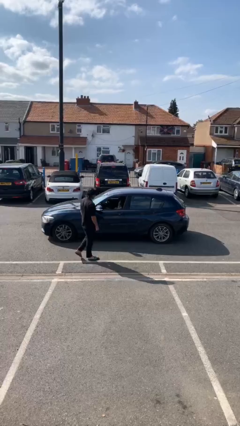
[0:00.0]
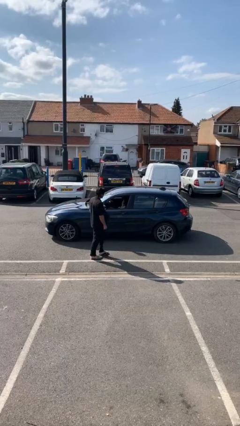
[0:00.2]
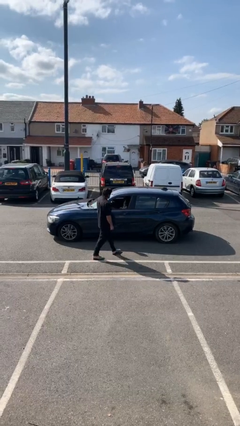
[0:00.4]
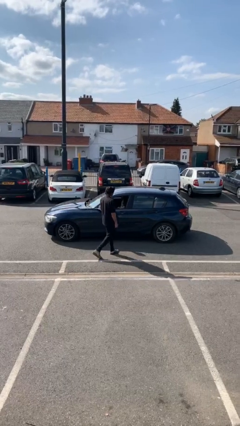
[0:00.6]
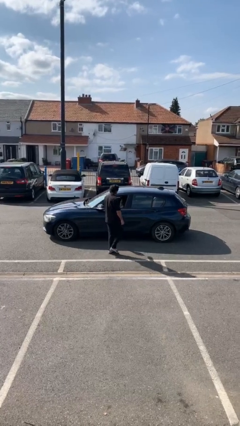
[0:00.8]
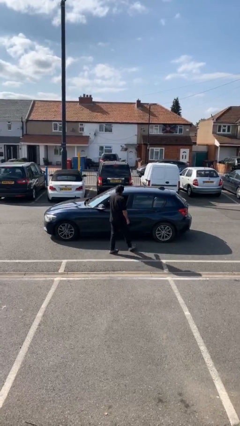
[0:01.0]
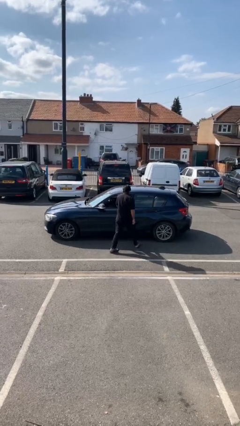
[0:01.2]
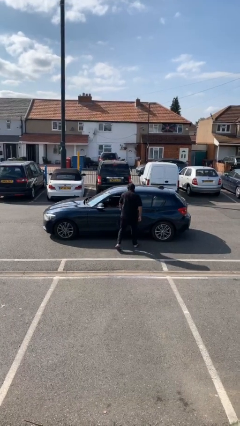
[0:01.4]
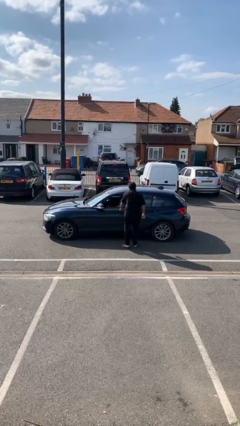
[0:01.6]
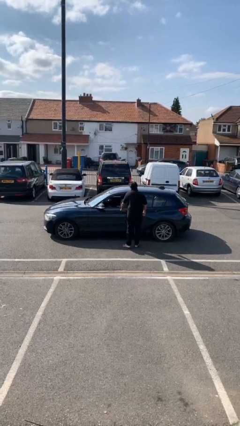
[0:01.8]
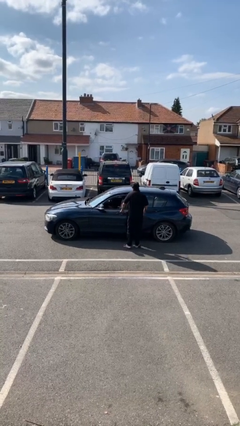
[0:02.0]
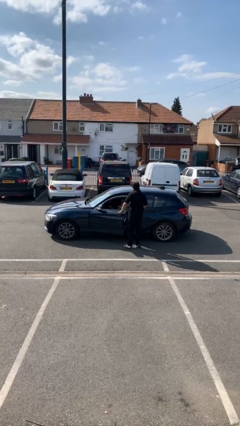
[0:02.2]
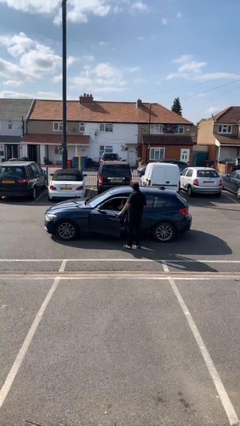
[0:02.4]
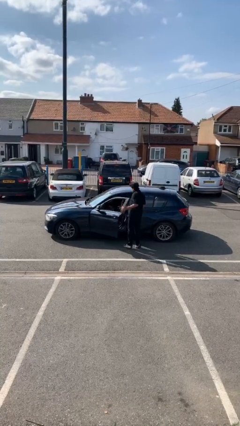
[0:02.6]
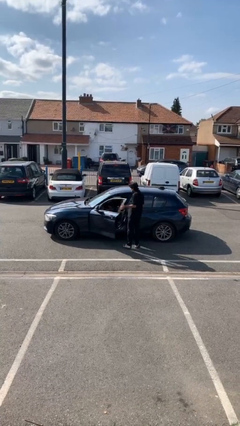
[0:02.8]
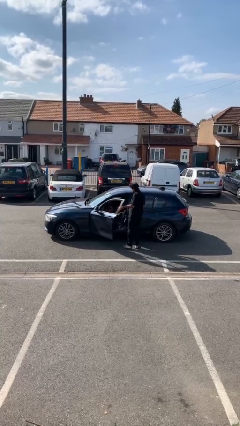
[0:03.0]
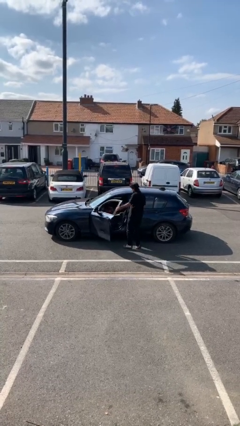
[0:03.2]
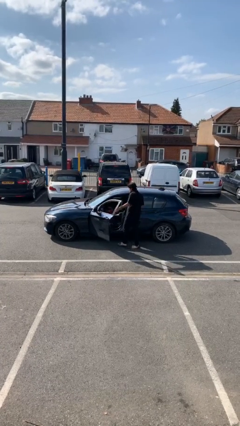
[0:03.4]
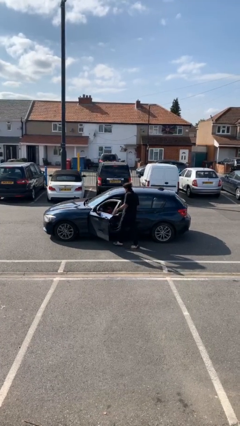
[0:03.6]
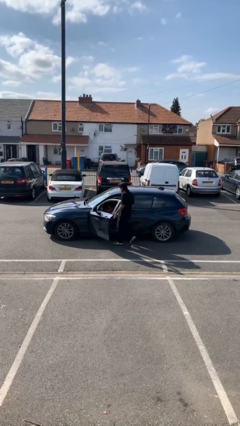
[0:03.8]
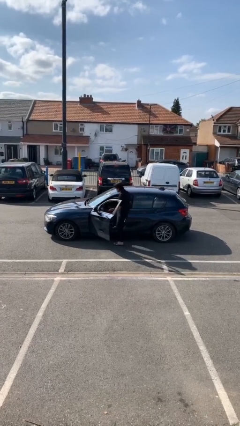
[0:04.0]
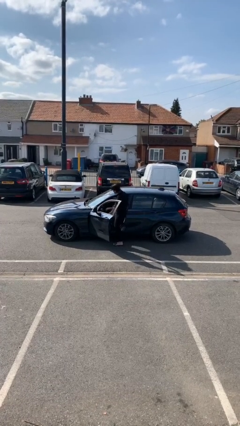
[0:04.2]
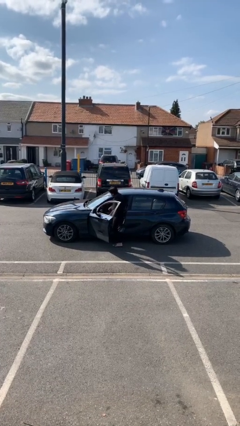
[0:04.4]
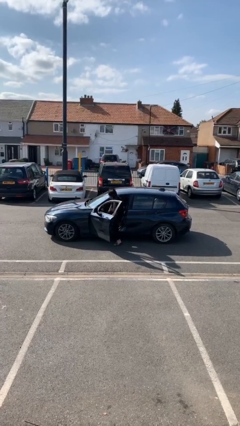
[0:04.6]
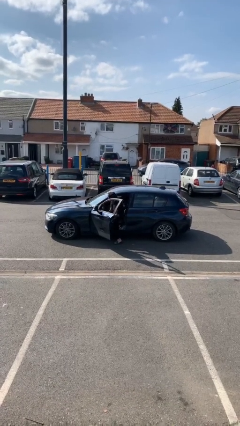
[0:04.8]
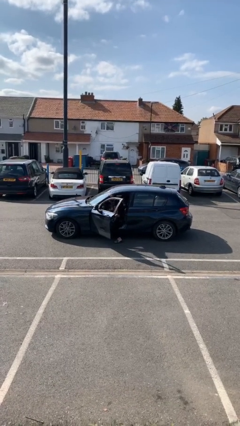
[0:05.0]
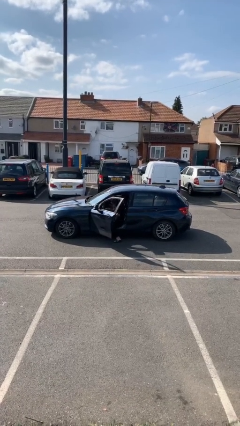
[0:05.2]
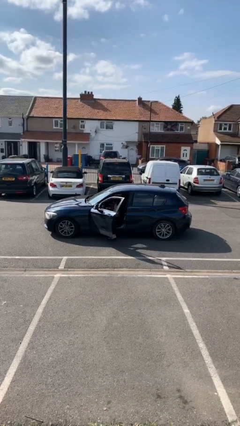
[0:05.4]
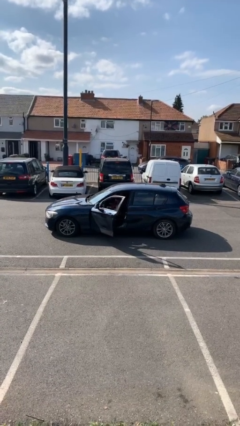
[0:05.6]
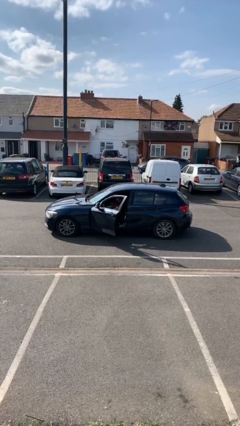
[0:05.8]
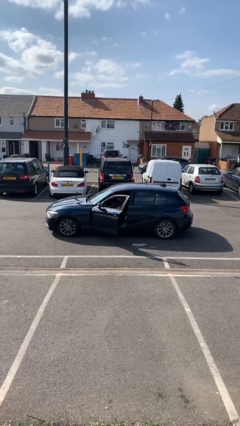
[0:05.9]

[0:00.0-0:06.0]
car picks up person

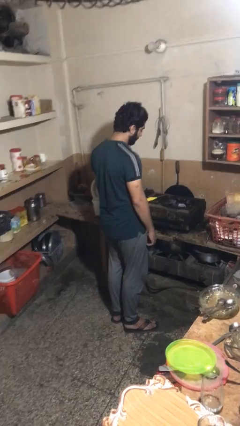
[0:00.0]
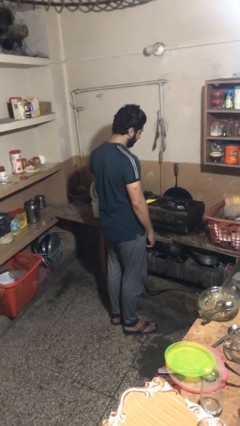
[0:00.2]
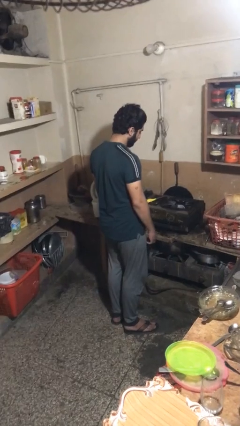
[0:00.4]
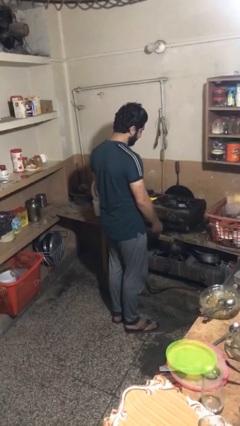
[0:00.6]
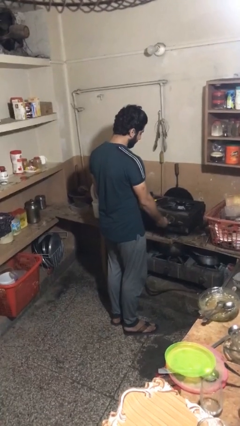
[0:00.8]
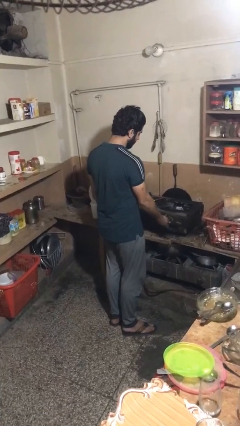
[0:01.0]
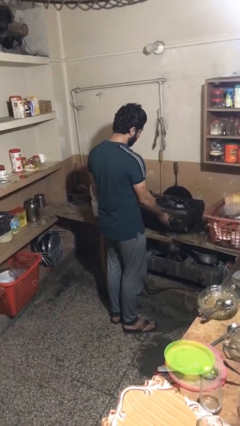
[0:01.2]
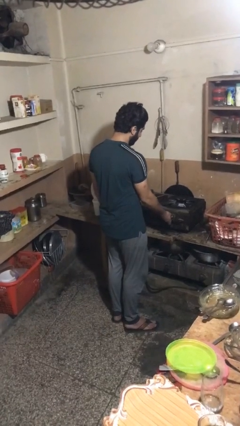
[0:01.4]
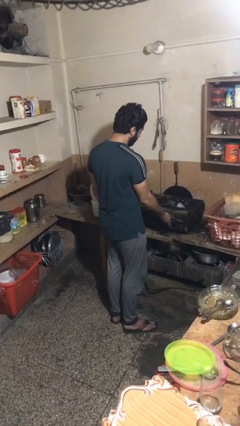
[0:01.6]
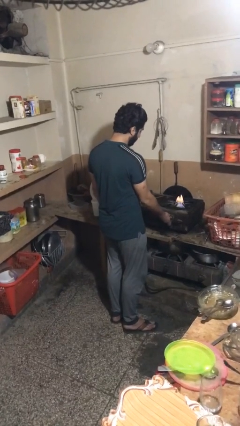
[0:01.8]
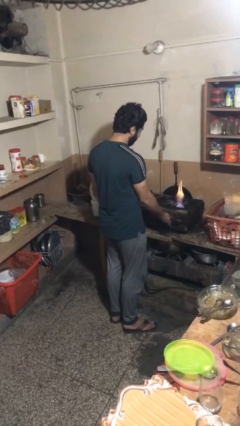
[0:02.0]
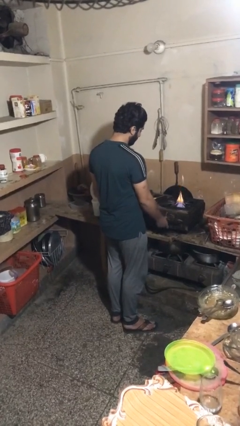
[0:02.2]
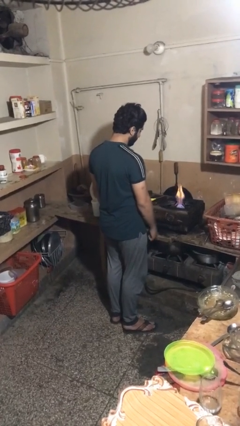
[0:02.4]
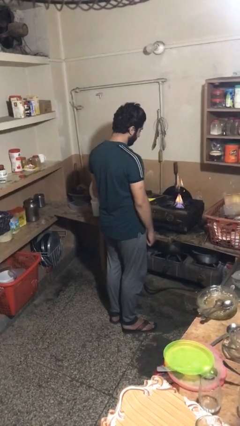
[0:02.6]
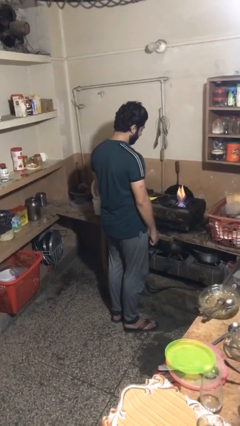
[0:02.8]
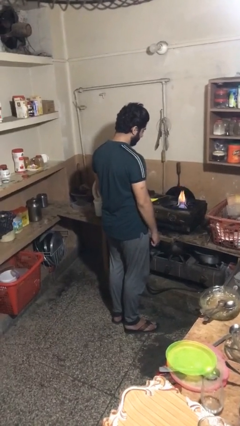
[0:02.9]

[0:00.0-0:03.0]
person turns on stovetop

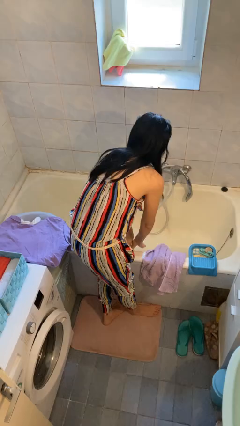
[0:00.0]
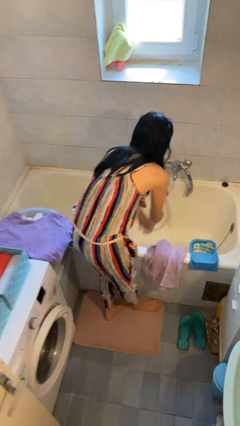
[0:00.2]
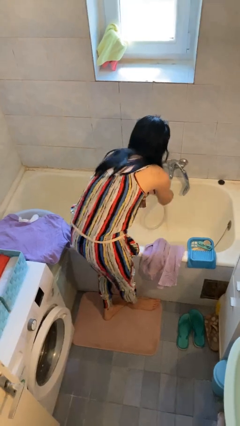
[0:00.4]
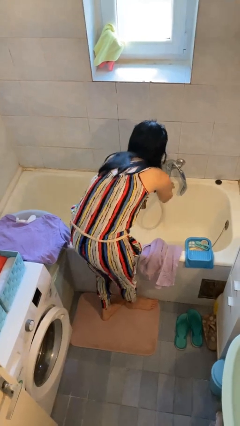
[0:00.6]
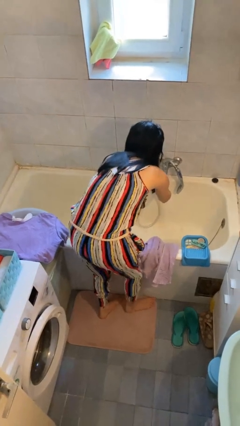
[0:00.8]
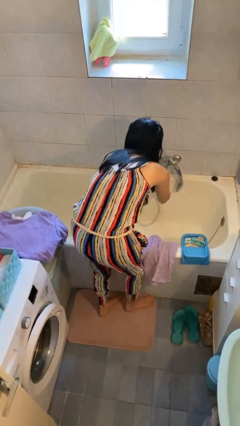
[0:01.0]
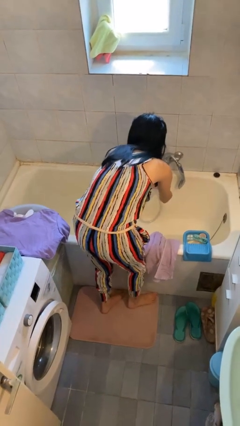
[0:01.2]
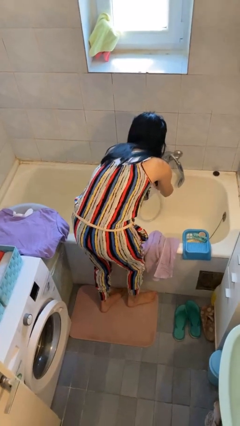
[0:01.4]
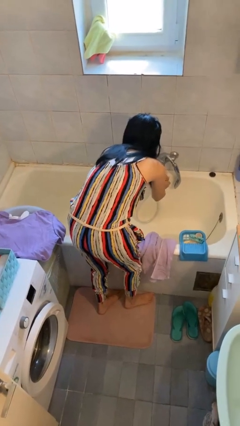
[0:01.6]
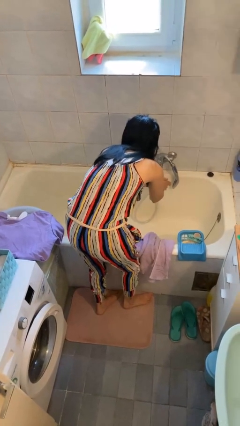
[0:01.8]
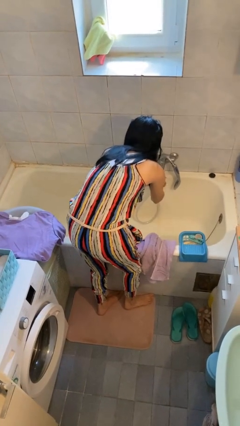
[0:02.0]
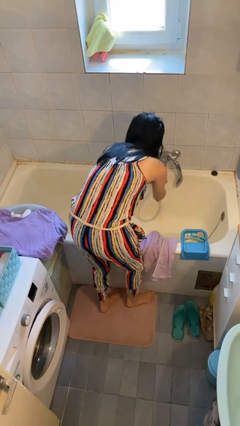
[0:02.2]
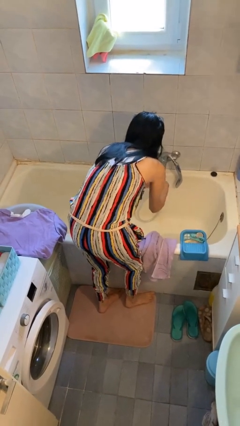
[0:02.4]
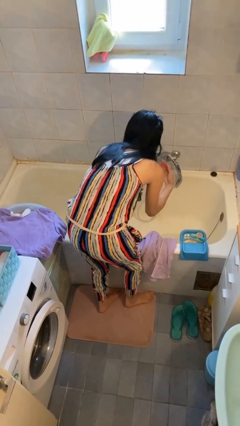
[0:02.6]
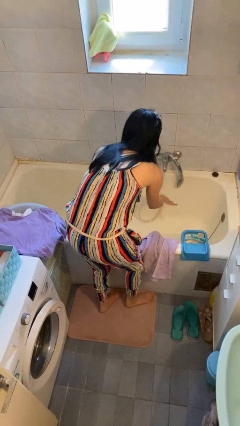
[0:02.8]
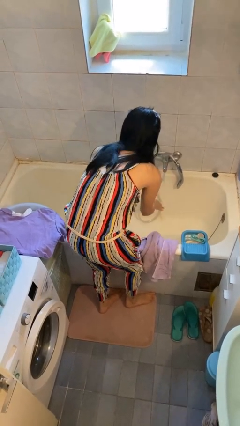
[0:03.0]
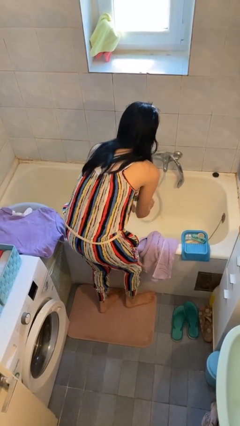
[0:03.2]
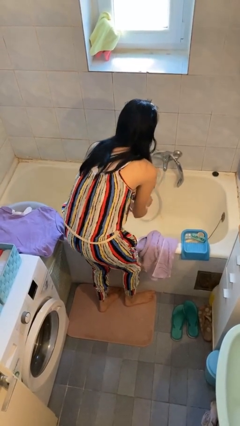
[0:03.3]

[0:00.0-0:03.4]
person washes hands

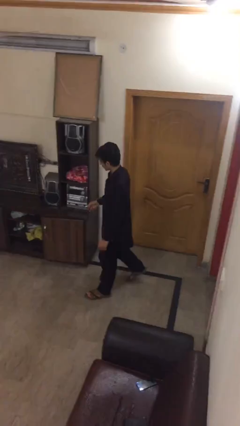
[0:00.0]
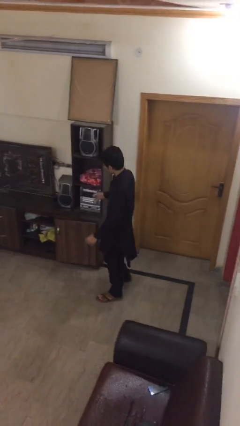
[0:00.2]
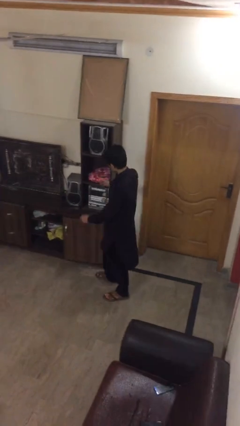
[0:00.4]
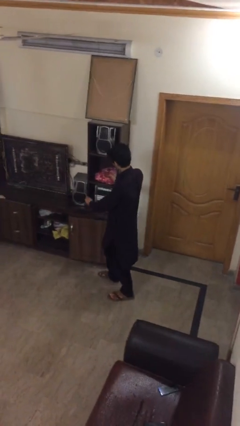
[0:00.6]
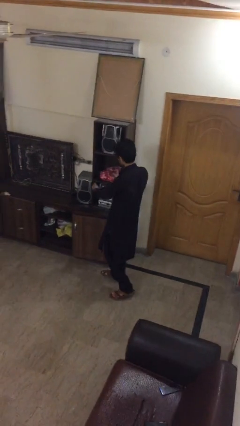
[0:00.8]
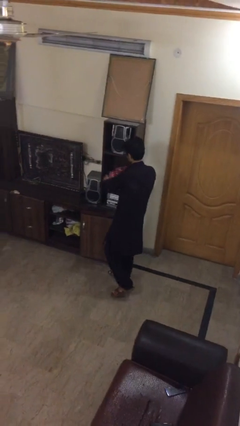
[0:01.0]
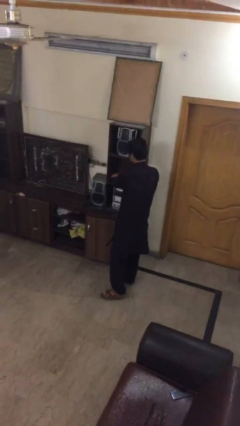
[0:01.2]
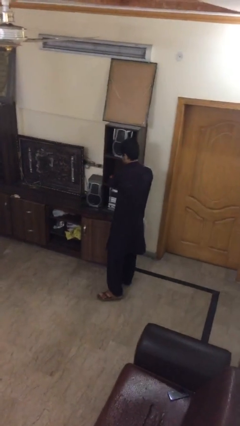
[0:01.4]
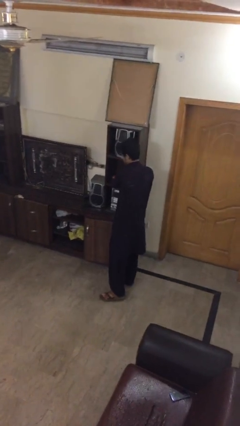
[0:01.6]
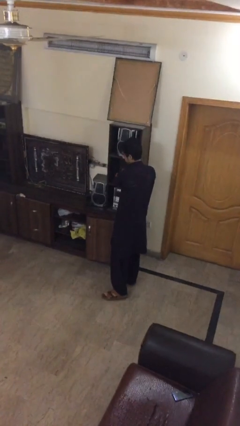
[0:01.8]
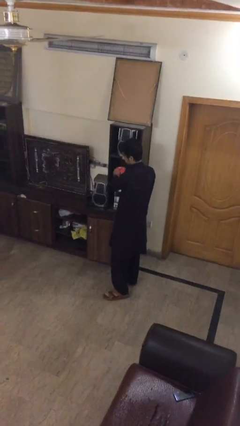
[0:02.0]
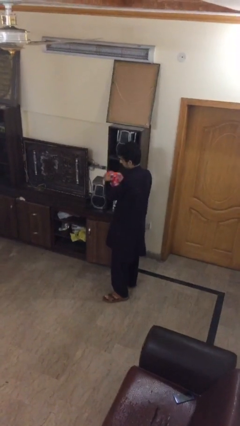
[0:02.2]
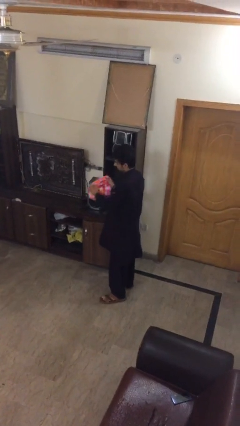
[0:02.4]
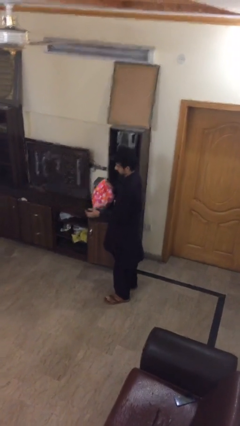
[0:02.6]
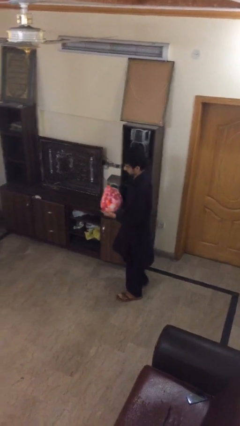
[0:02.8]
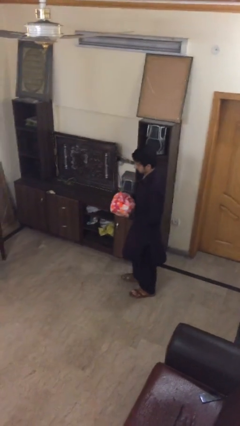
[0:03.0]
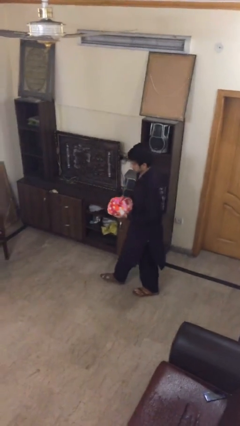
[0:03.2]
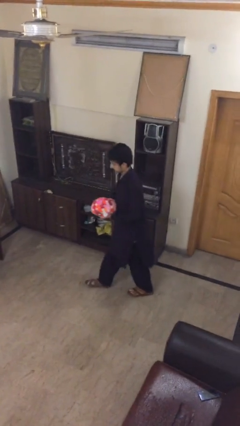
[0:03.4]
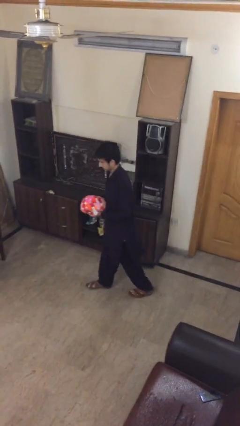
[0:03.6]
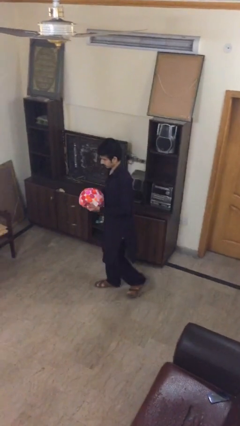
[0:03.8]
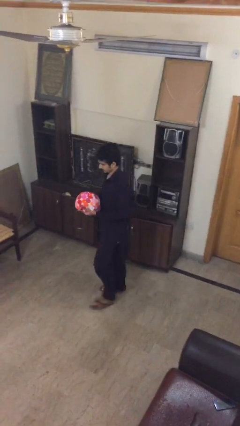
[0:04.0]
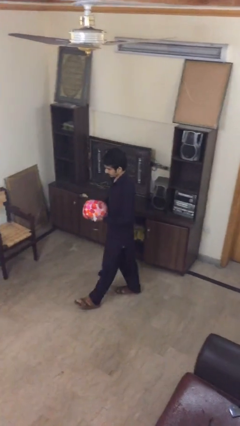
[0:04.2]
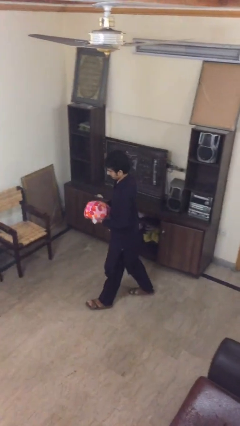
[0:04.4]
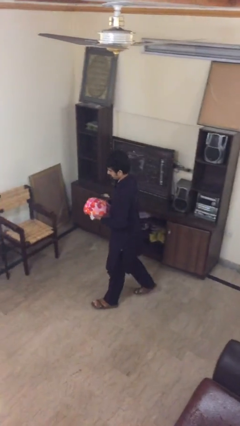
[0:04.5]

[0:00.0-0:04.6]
person picks up object from shelf

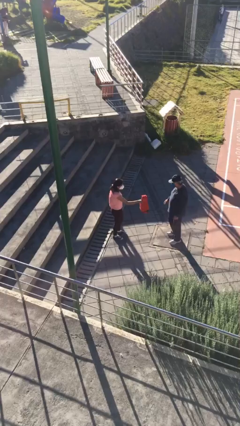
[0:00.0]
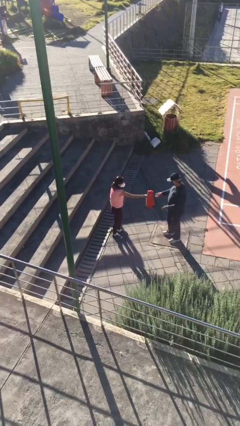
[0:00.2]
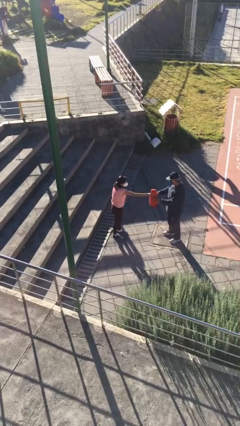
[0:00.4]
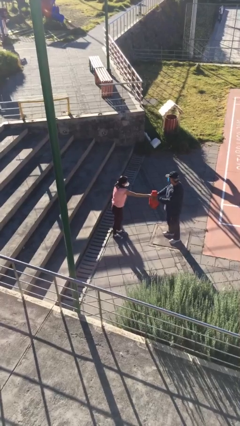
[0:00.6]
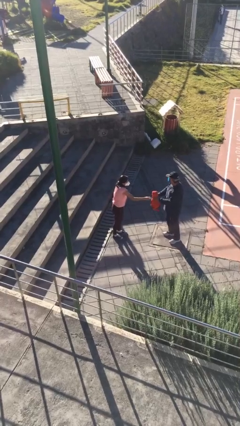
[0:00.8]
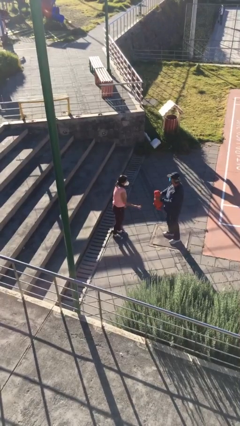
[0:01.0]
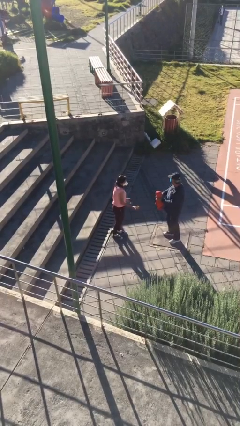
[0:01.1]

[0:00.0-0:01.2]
person transfers object to person
